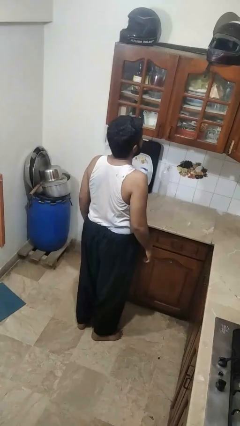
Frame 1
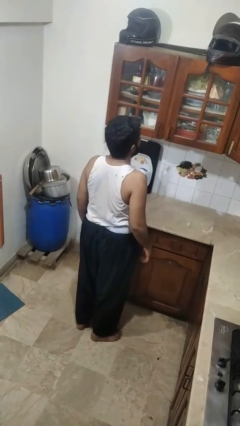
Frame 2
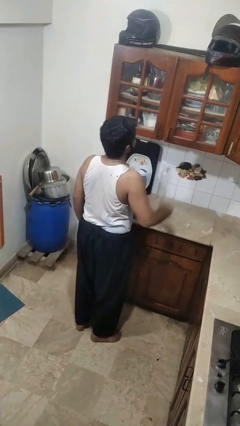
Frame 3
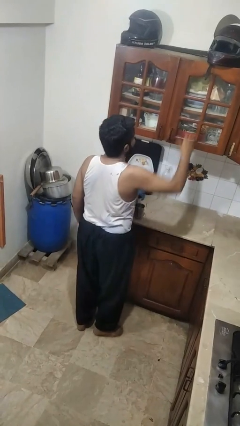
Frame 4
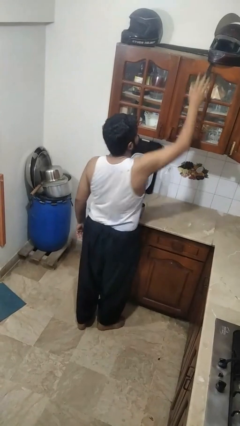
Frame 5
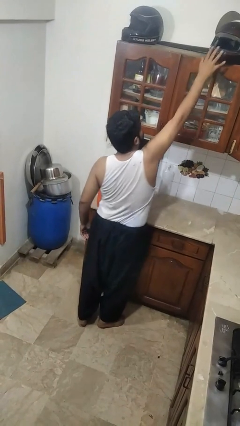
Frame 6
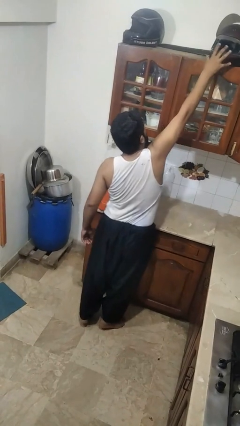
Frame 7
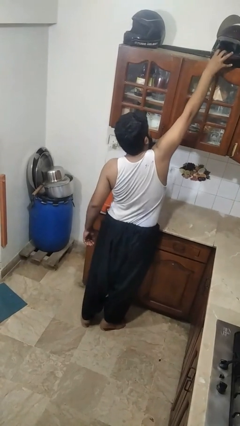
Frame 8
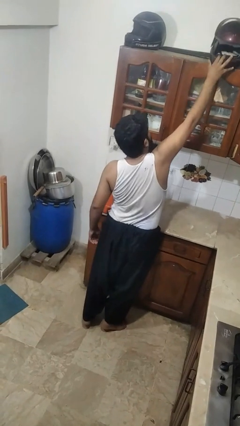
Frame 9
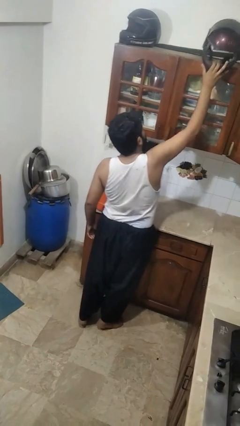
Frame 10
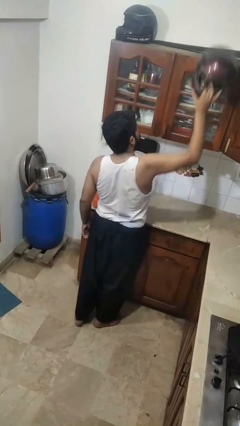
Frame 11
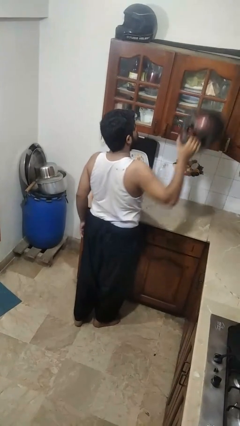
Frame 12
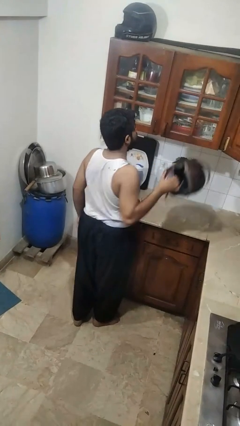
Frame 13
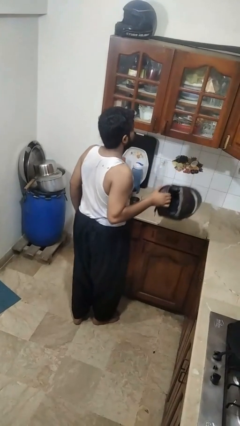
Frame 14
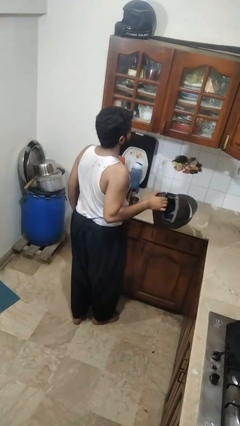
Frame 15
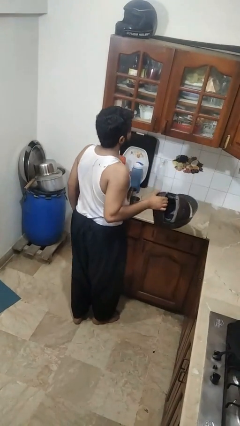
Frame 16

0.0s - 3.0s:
person picks up object from shelf

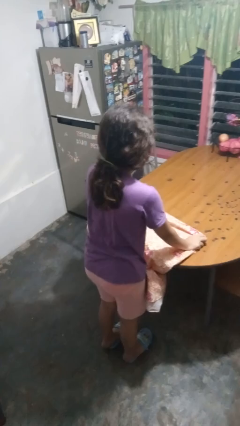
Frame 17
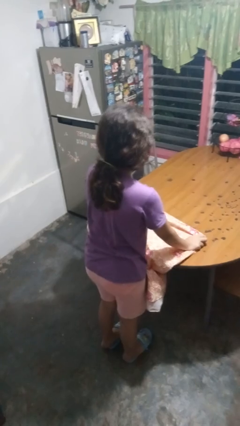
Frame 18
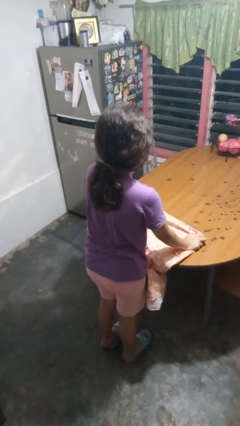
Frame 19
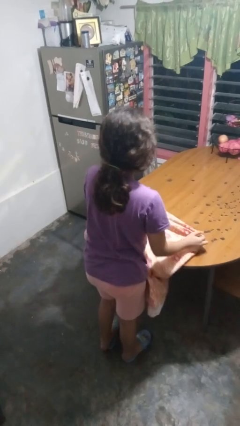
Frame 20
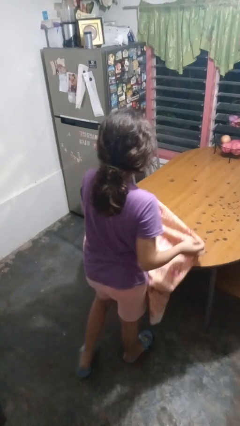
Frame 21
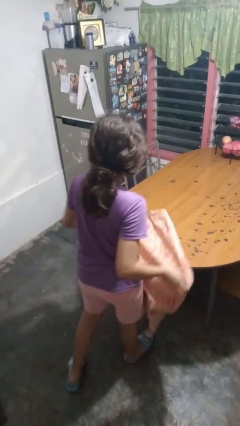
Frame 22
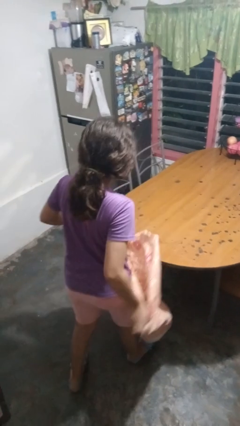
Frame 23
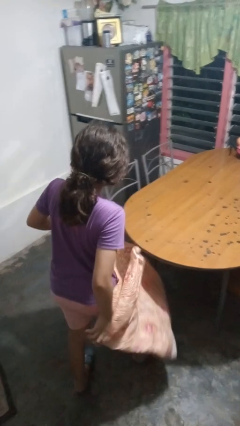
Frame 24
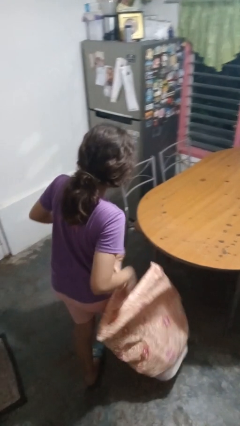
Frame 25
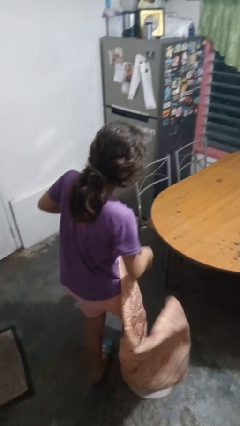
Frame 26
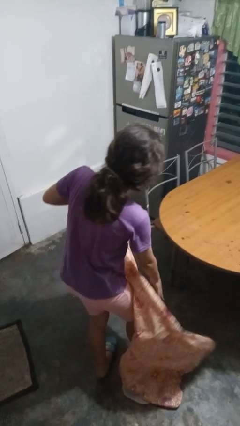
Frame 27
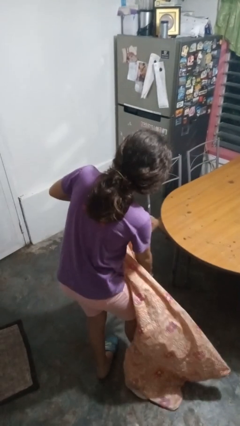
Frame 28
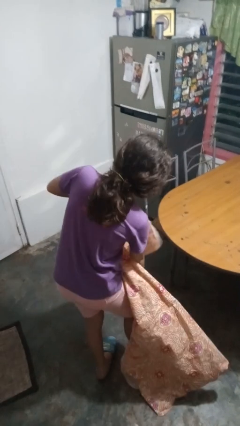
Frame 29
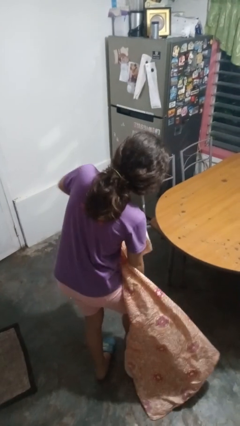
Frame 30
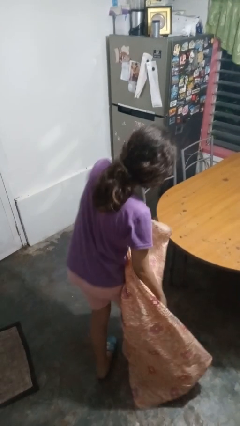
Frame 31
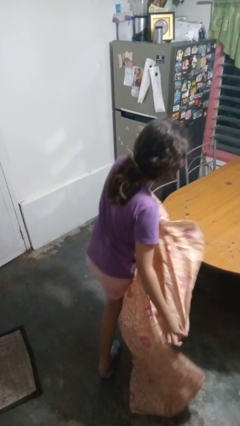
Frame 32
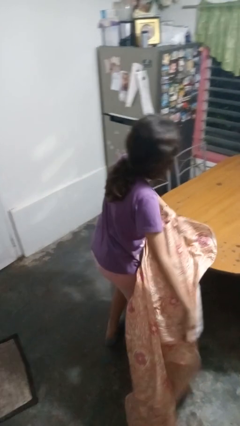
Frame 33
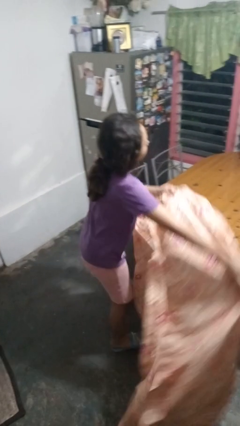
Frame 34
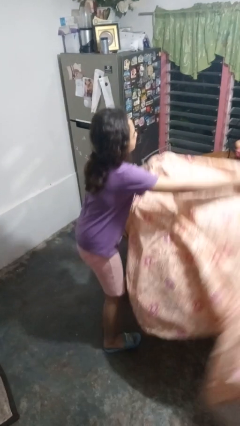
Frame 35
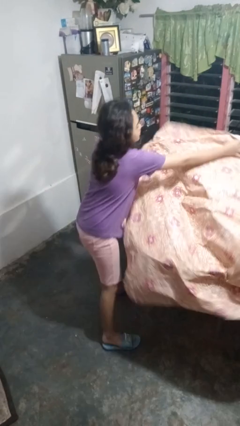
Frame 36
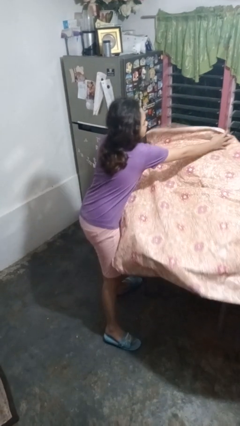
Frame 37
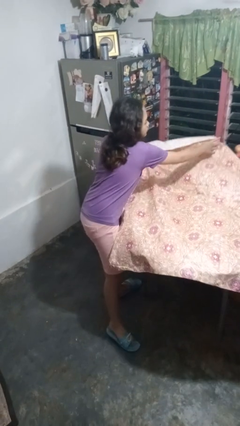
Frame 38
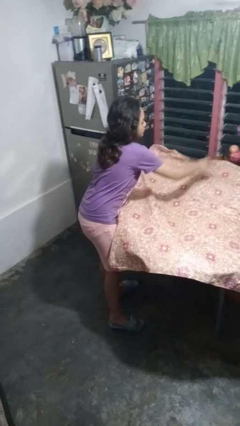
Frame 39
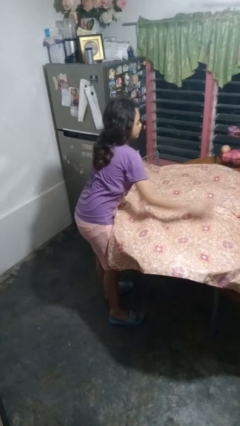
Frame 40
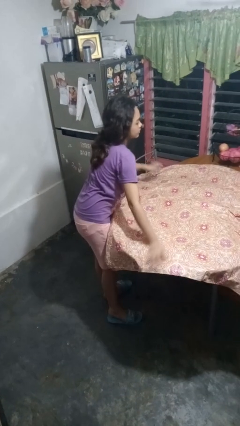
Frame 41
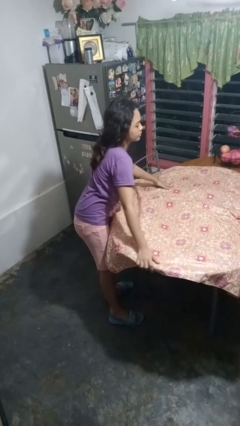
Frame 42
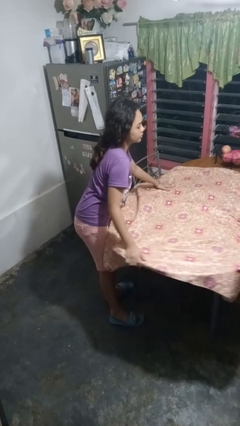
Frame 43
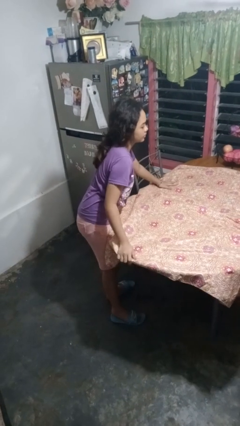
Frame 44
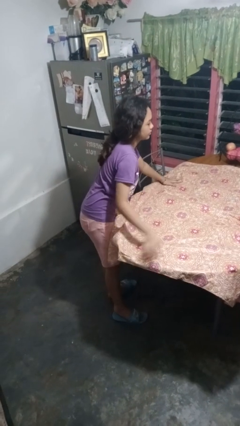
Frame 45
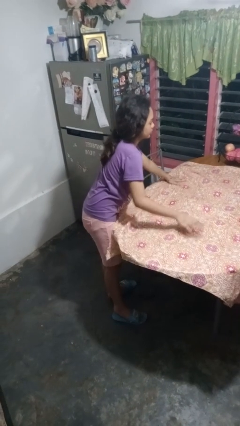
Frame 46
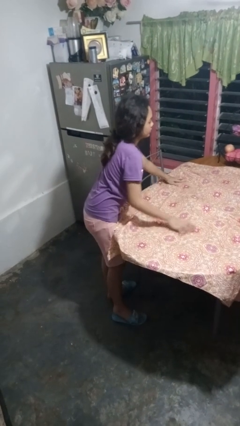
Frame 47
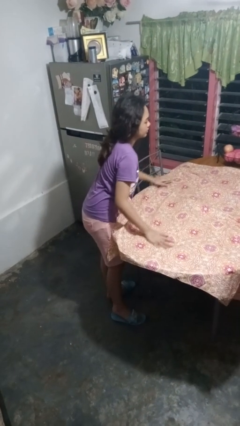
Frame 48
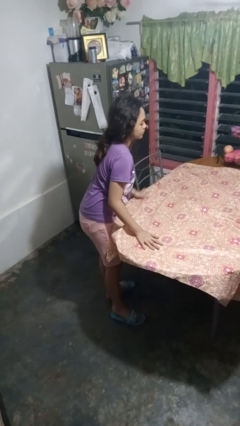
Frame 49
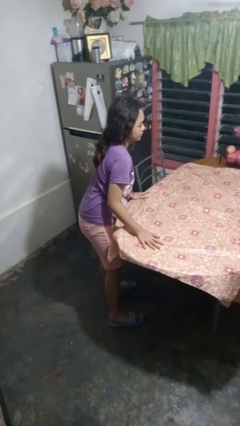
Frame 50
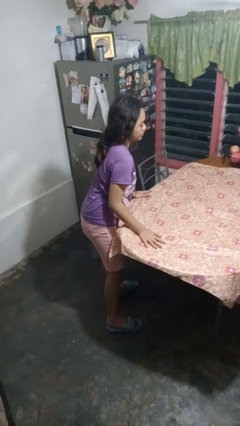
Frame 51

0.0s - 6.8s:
person spreads tablecloth

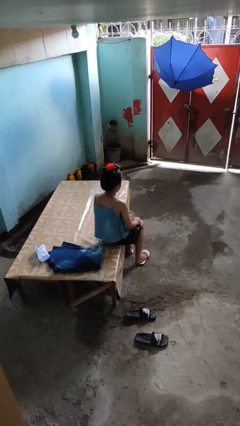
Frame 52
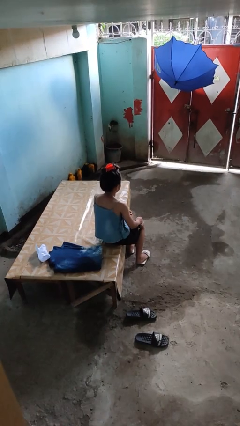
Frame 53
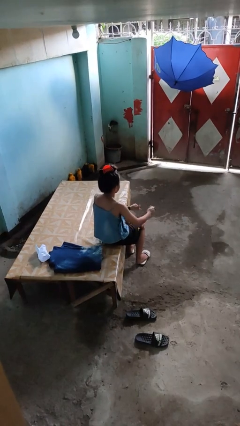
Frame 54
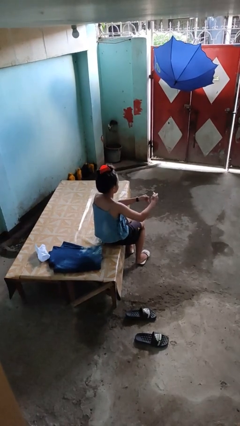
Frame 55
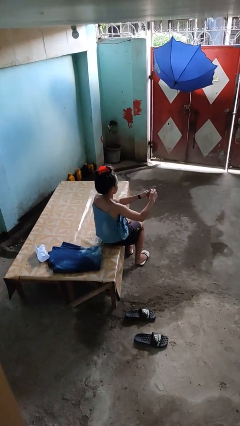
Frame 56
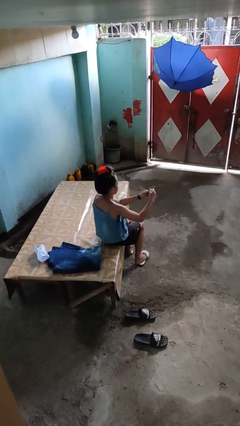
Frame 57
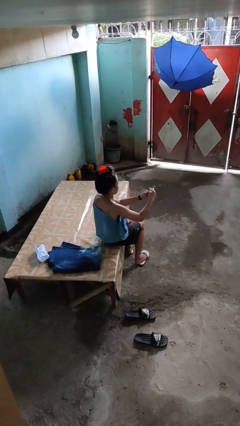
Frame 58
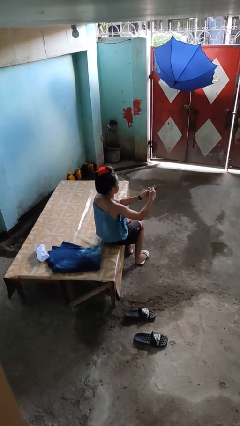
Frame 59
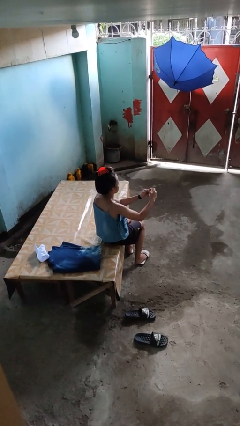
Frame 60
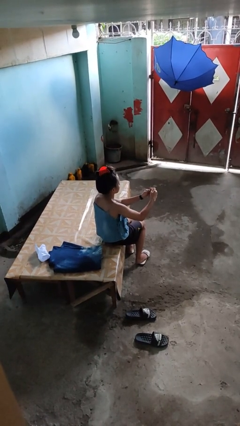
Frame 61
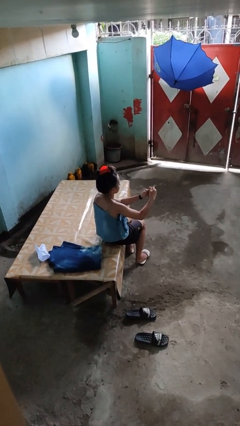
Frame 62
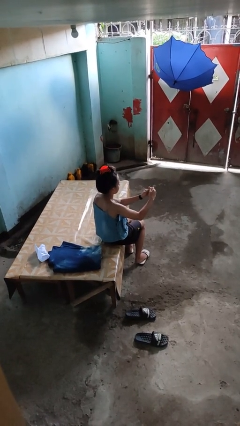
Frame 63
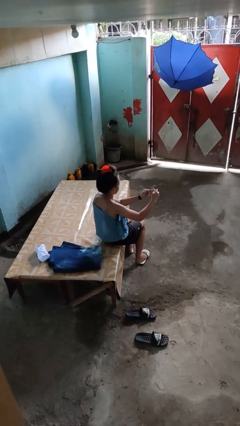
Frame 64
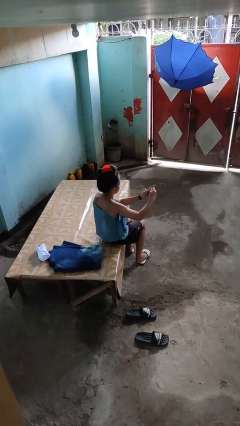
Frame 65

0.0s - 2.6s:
person files fingernails

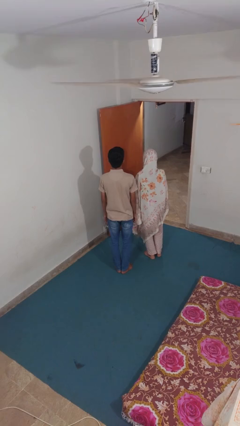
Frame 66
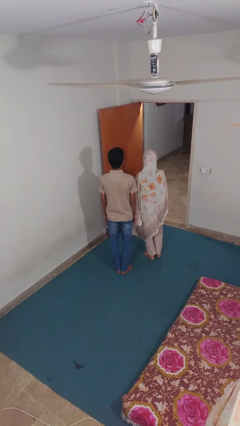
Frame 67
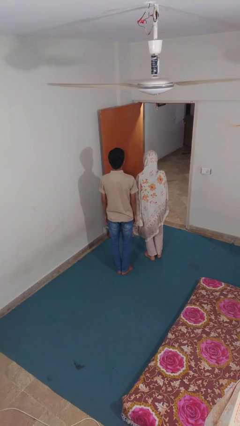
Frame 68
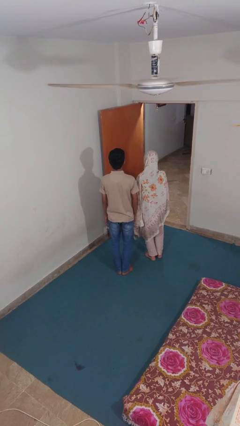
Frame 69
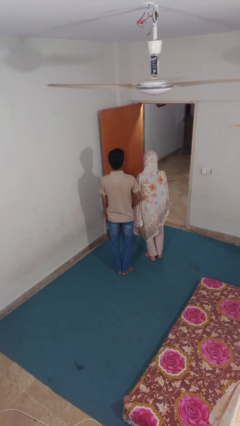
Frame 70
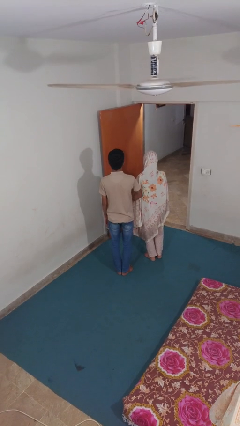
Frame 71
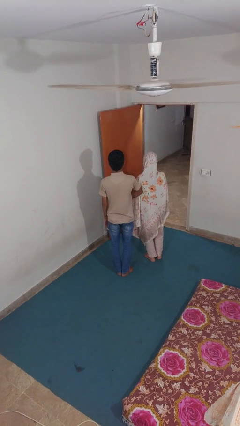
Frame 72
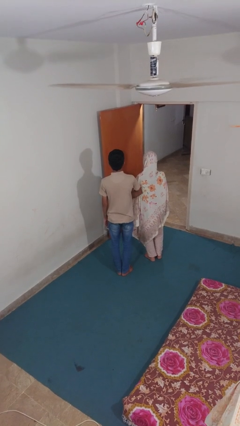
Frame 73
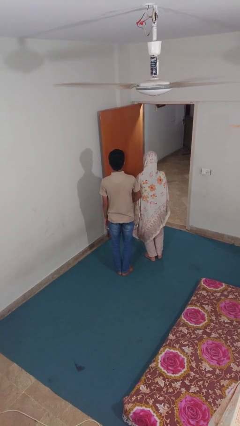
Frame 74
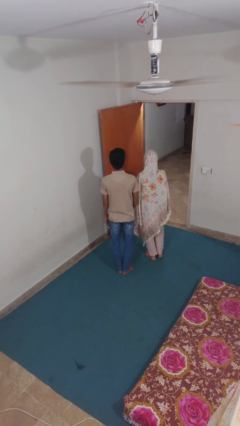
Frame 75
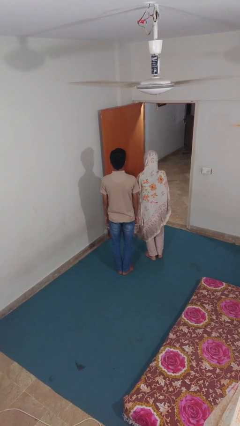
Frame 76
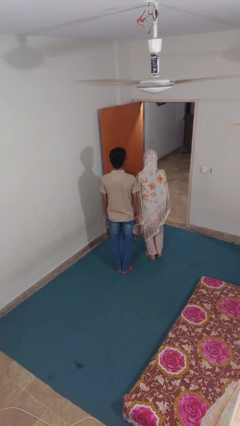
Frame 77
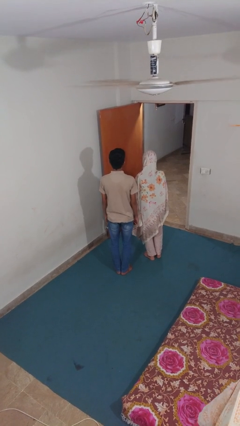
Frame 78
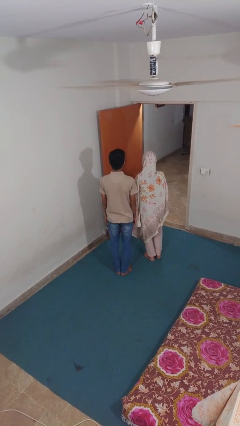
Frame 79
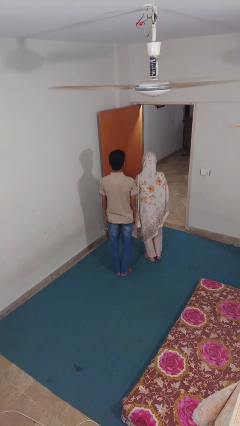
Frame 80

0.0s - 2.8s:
person nudges person with elbow

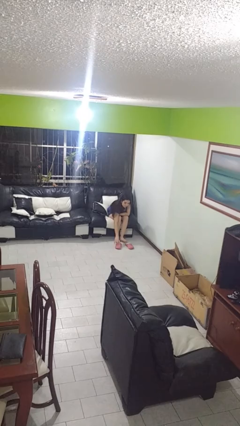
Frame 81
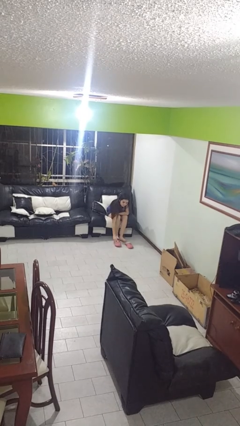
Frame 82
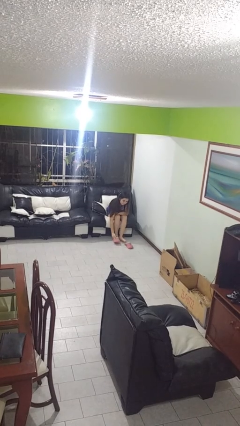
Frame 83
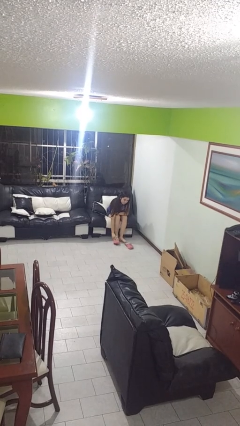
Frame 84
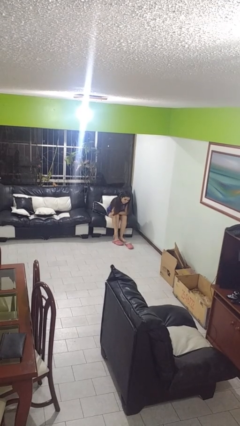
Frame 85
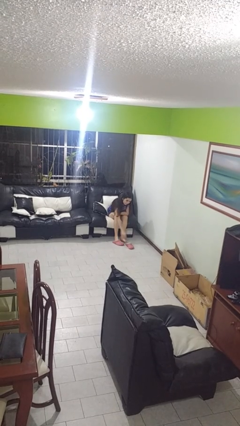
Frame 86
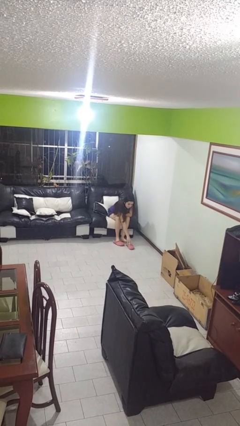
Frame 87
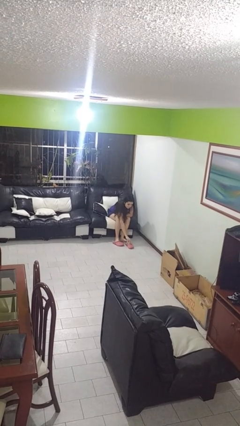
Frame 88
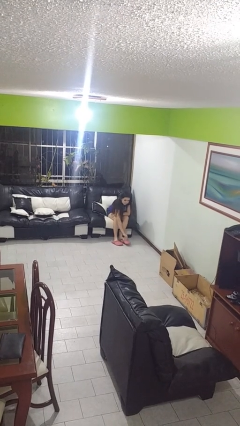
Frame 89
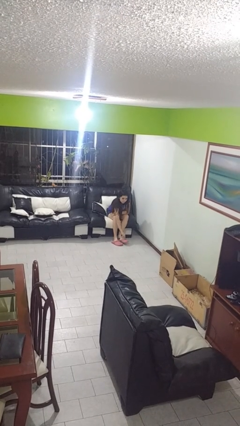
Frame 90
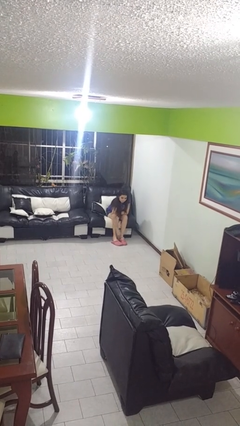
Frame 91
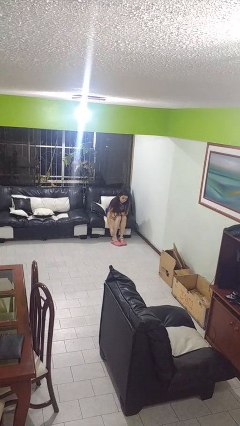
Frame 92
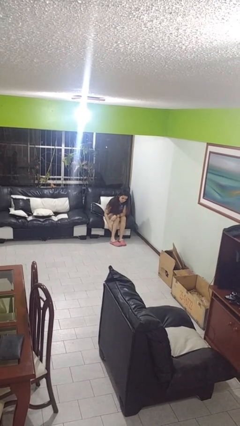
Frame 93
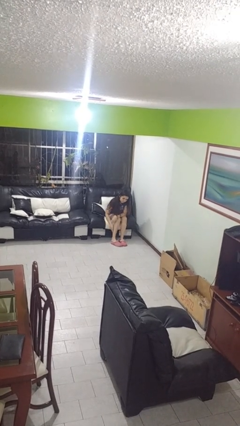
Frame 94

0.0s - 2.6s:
person puts on shoes

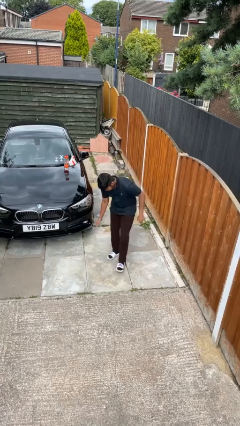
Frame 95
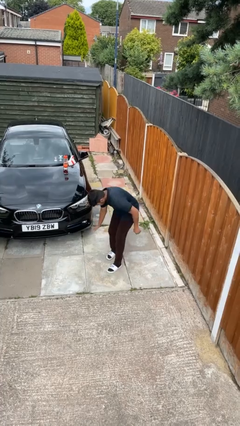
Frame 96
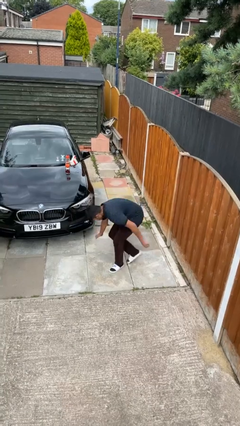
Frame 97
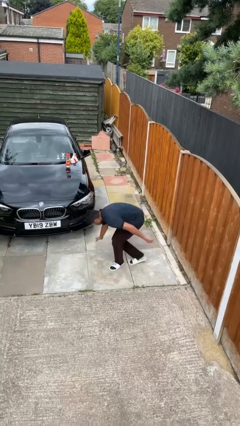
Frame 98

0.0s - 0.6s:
person sits crisscross
